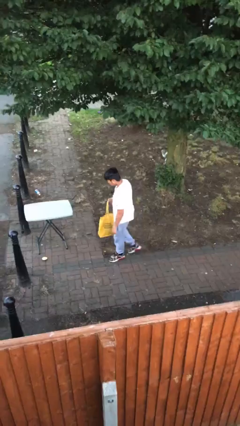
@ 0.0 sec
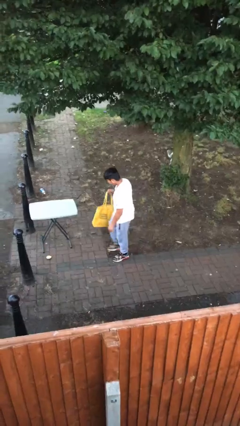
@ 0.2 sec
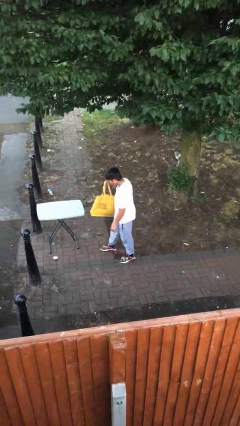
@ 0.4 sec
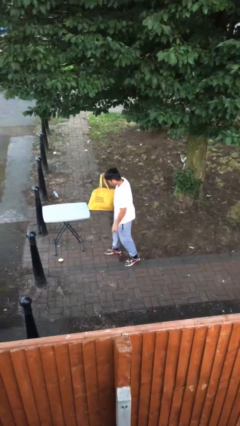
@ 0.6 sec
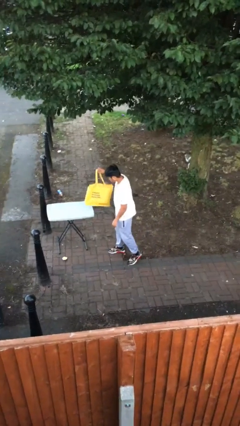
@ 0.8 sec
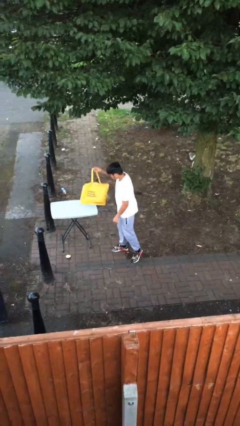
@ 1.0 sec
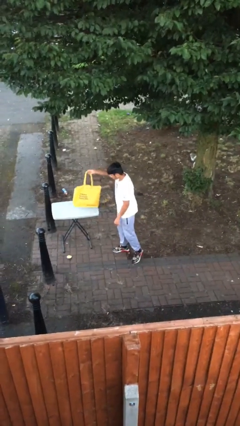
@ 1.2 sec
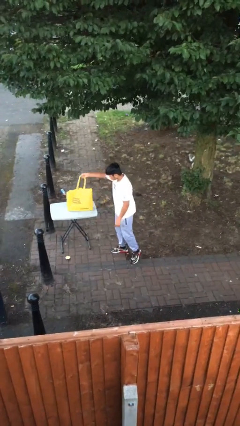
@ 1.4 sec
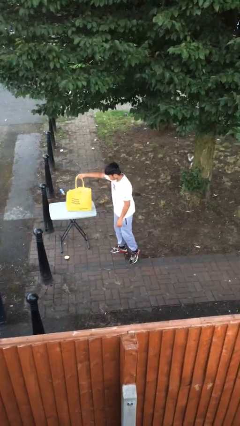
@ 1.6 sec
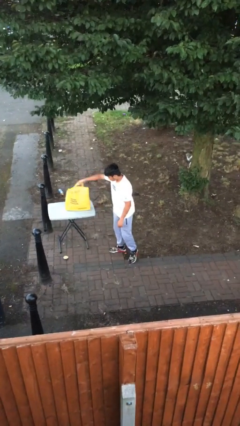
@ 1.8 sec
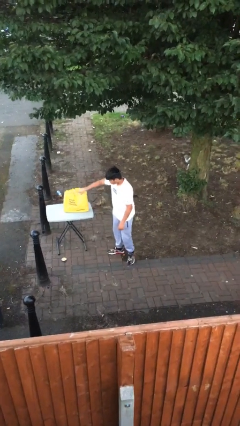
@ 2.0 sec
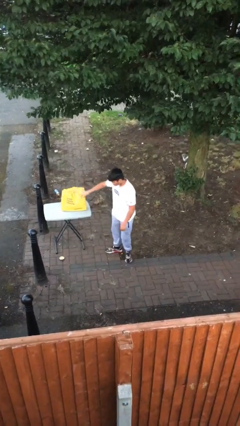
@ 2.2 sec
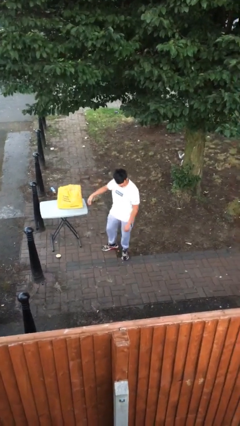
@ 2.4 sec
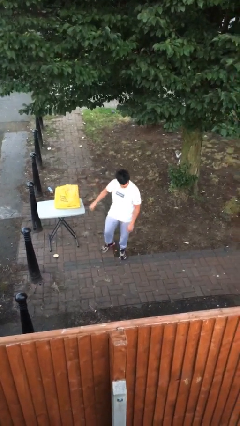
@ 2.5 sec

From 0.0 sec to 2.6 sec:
person puts down object on table

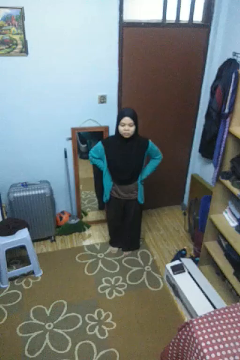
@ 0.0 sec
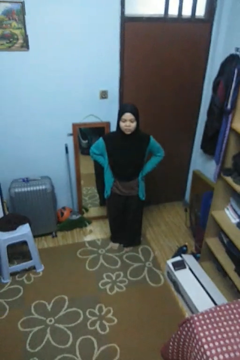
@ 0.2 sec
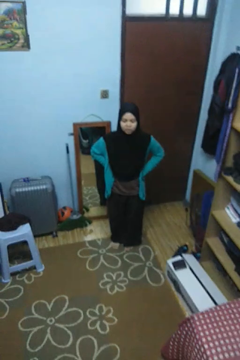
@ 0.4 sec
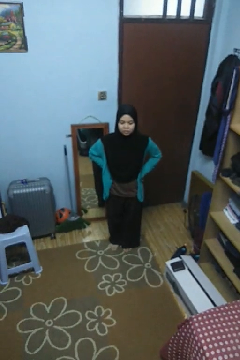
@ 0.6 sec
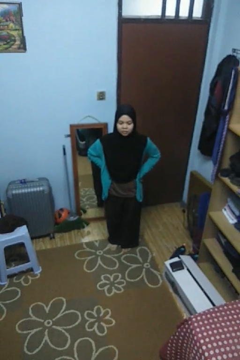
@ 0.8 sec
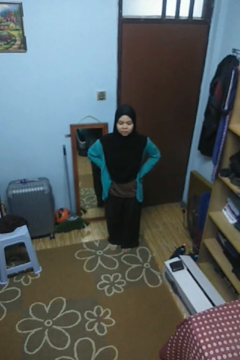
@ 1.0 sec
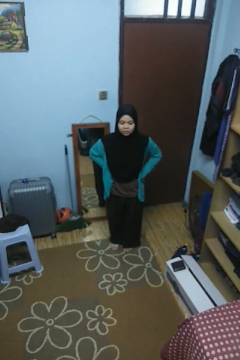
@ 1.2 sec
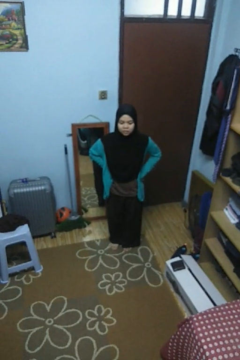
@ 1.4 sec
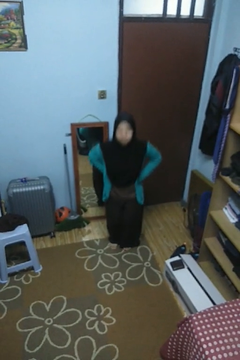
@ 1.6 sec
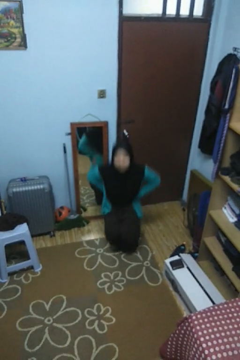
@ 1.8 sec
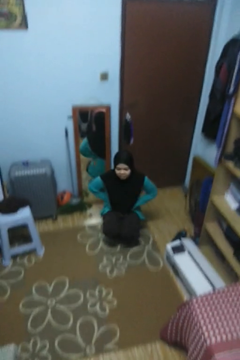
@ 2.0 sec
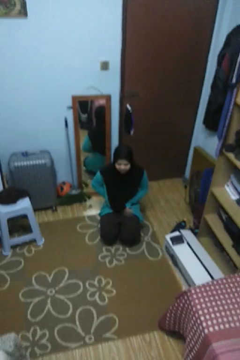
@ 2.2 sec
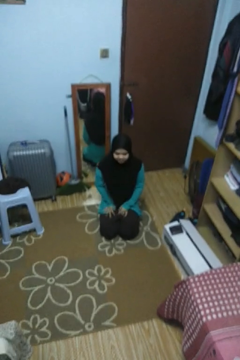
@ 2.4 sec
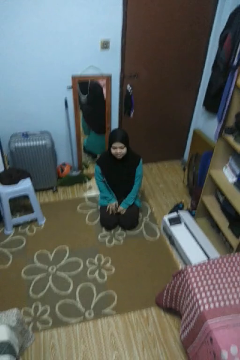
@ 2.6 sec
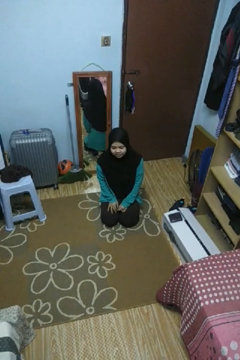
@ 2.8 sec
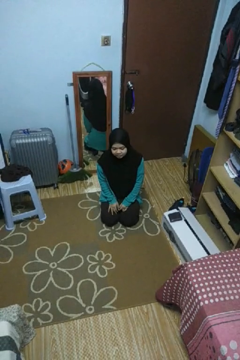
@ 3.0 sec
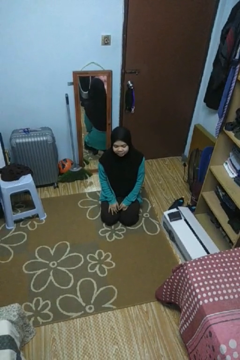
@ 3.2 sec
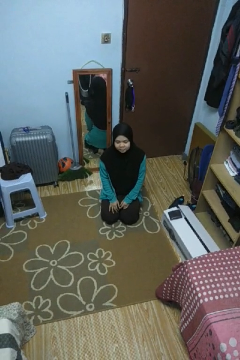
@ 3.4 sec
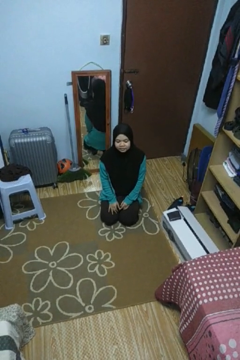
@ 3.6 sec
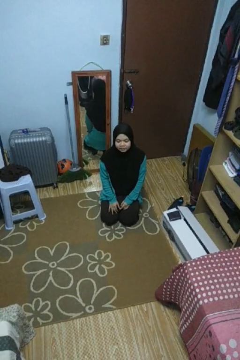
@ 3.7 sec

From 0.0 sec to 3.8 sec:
person kneels

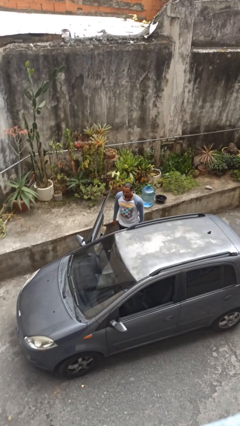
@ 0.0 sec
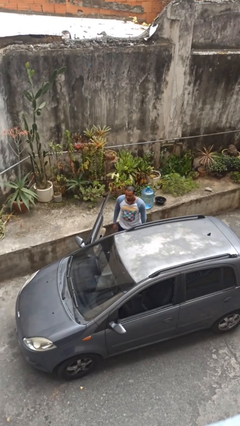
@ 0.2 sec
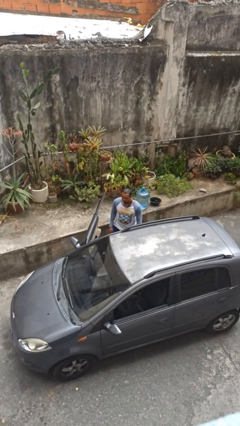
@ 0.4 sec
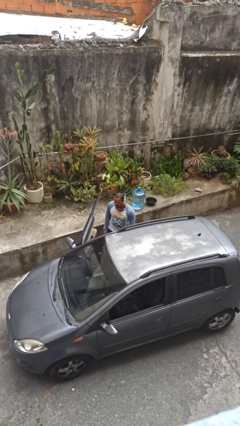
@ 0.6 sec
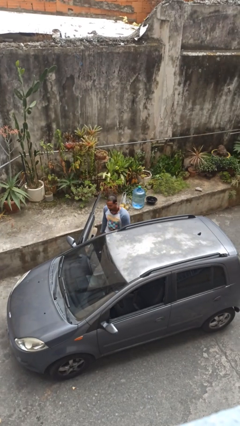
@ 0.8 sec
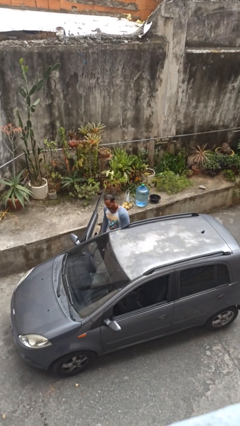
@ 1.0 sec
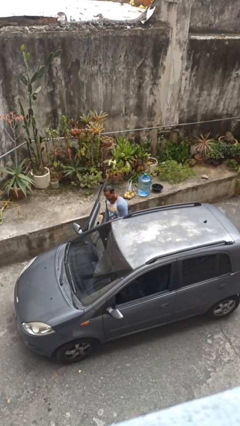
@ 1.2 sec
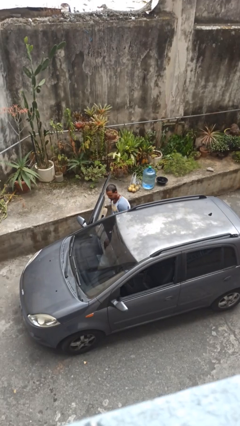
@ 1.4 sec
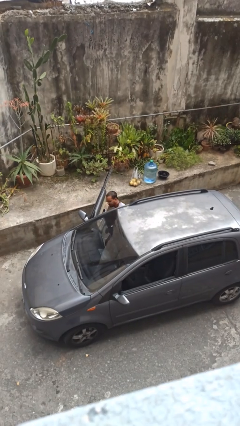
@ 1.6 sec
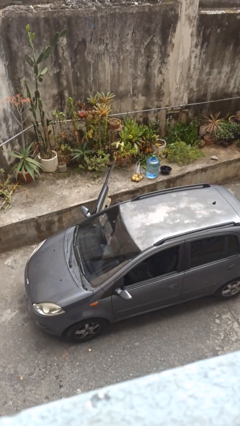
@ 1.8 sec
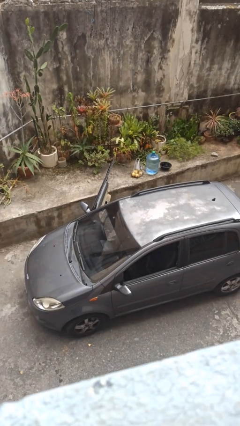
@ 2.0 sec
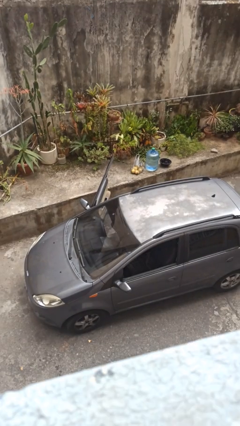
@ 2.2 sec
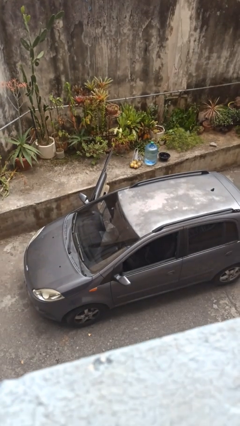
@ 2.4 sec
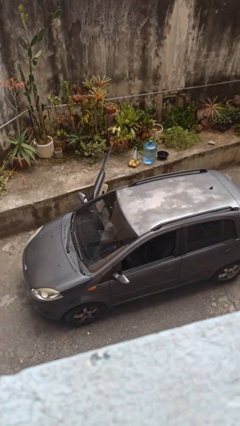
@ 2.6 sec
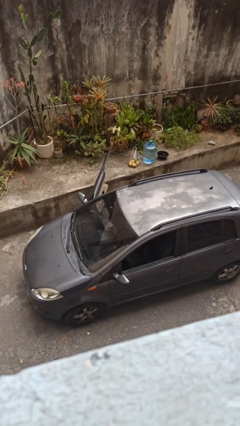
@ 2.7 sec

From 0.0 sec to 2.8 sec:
person enters car

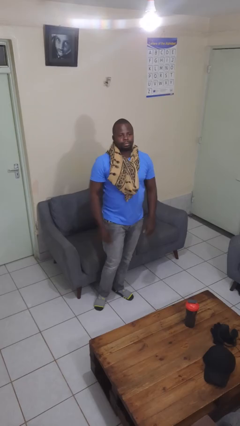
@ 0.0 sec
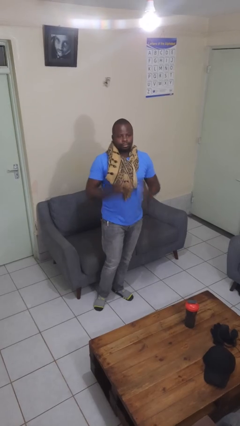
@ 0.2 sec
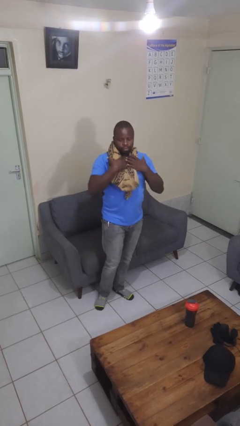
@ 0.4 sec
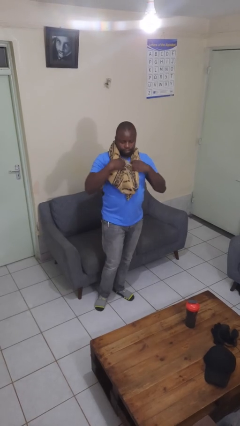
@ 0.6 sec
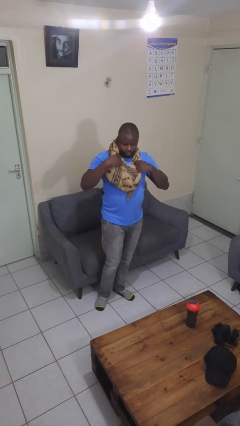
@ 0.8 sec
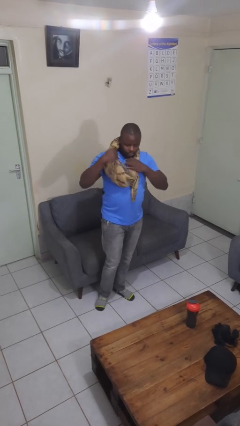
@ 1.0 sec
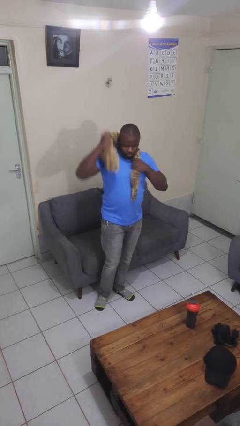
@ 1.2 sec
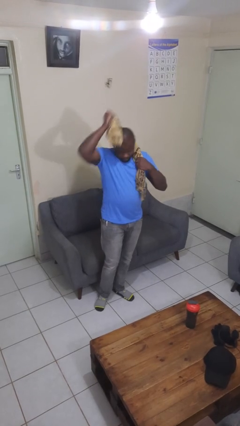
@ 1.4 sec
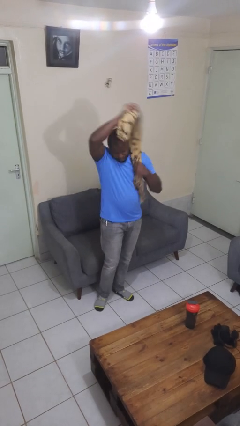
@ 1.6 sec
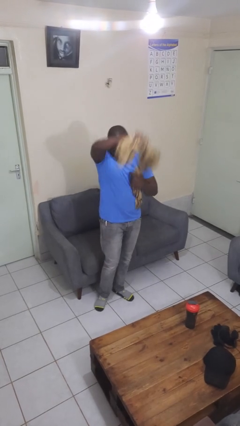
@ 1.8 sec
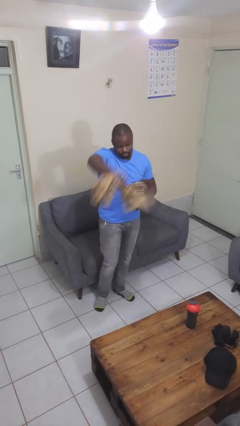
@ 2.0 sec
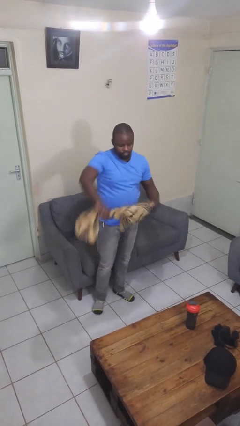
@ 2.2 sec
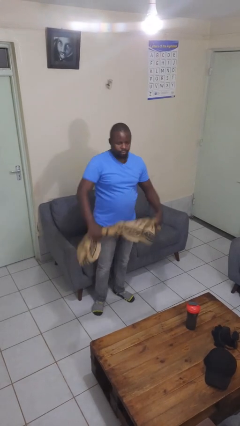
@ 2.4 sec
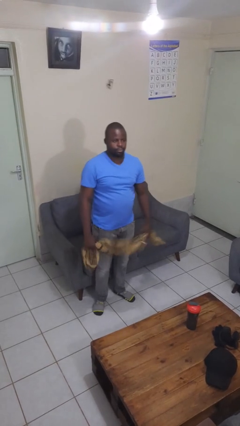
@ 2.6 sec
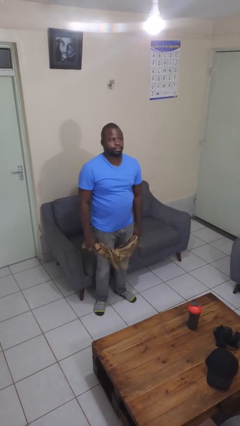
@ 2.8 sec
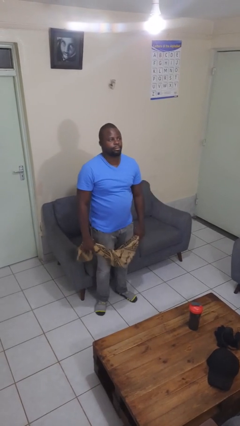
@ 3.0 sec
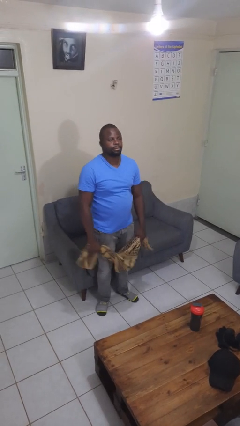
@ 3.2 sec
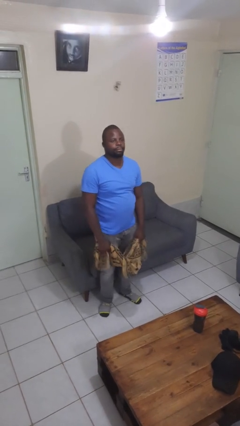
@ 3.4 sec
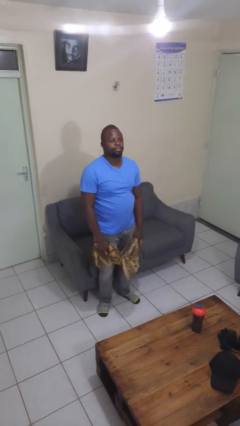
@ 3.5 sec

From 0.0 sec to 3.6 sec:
person takes off scarf

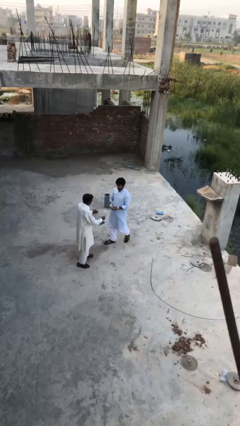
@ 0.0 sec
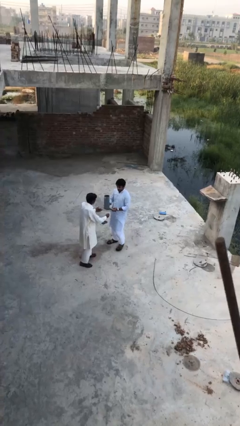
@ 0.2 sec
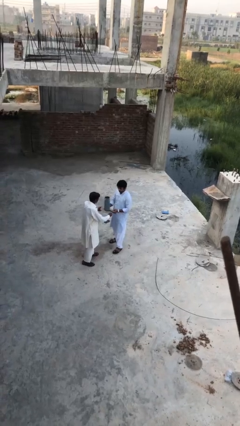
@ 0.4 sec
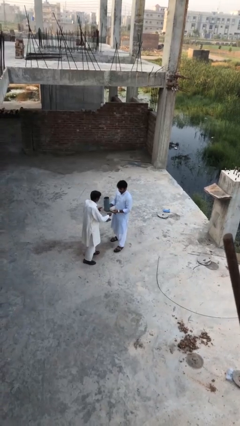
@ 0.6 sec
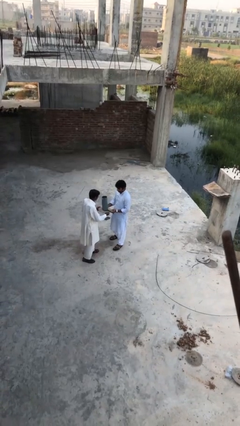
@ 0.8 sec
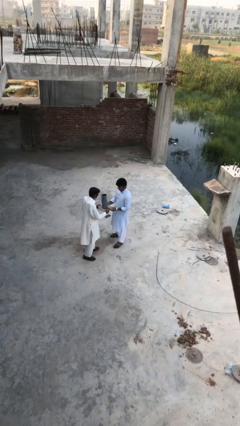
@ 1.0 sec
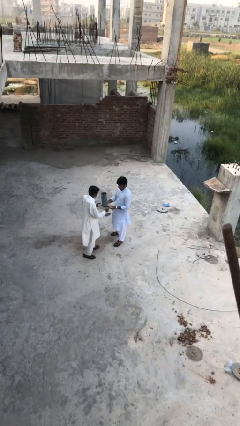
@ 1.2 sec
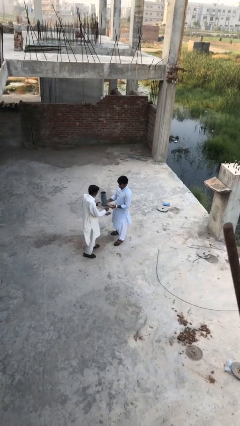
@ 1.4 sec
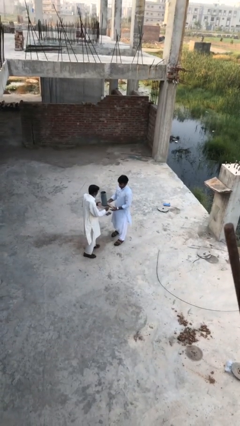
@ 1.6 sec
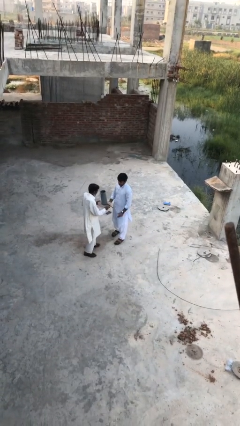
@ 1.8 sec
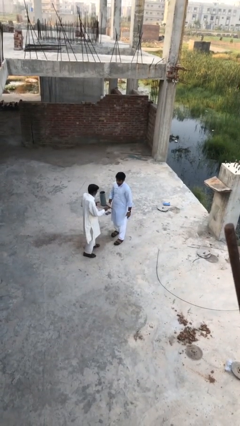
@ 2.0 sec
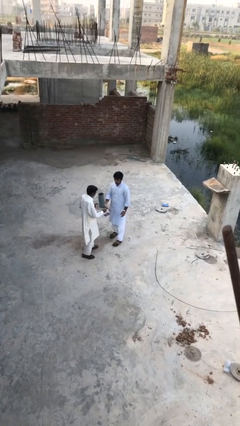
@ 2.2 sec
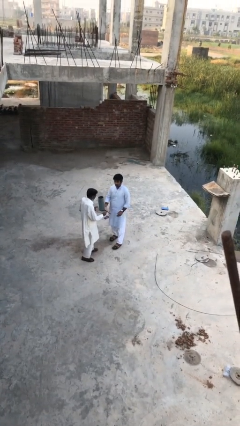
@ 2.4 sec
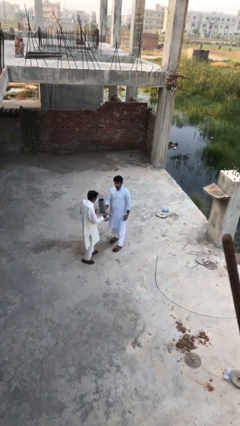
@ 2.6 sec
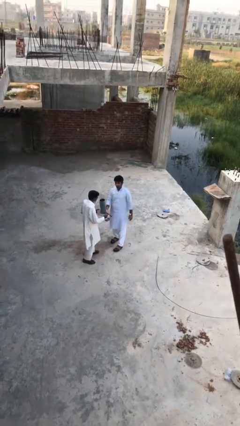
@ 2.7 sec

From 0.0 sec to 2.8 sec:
person transfers object to person

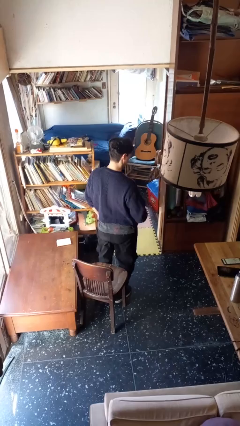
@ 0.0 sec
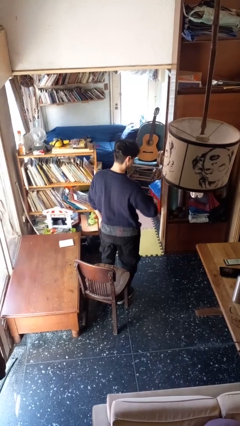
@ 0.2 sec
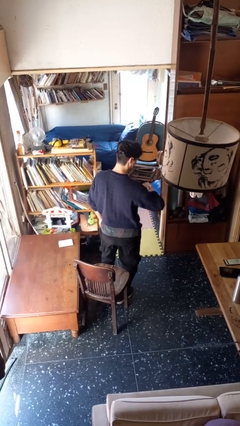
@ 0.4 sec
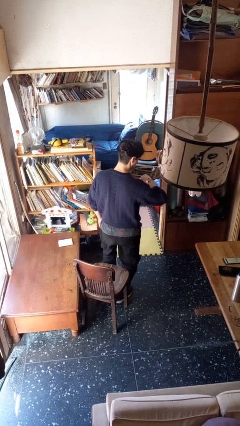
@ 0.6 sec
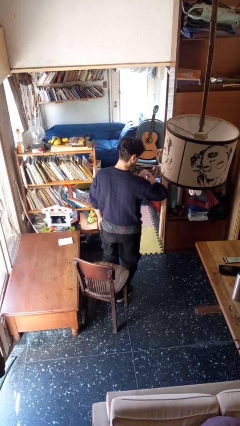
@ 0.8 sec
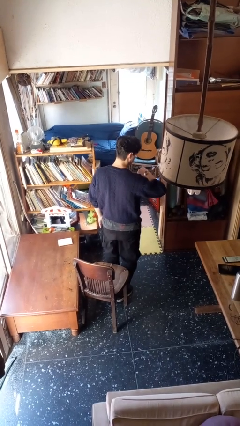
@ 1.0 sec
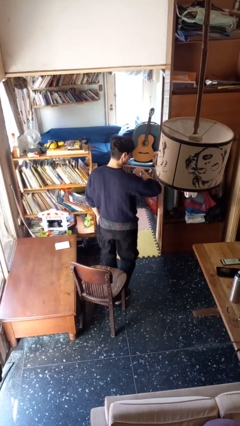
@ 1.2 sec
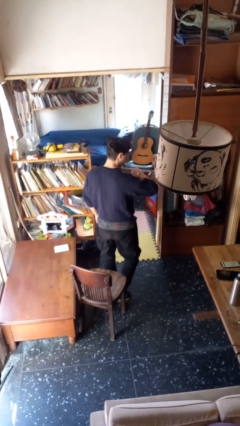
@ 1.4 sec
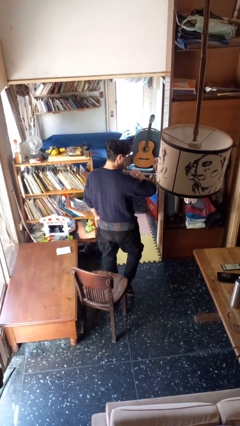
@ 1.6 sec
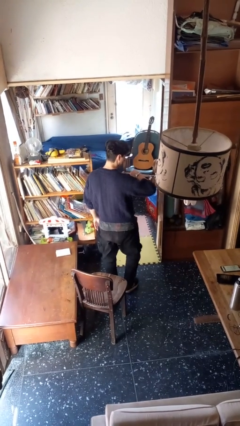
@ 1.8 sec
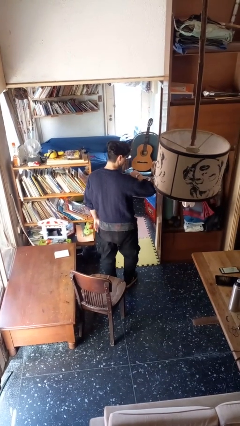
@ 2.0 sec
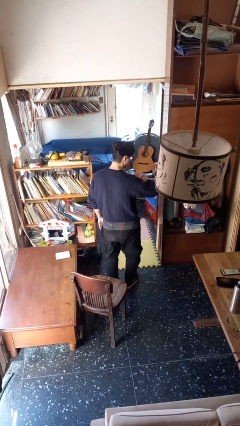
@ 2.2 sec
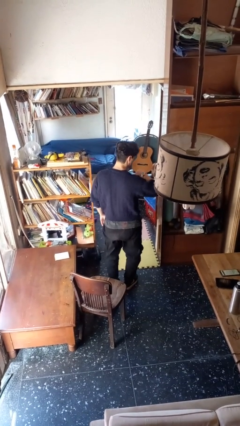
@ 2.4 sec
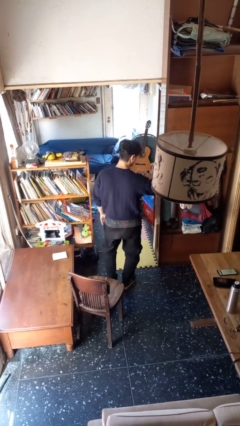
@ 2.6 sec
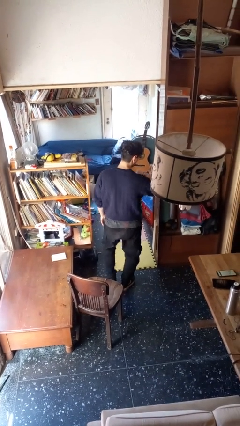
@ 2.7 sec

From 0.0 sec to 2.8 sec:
person looks at wristwatch
